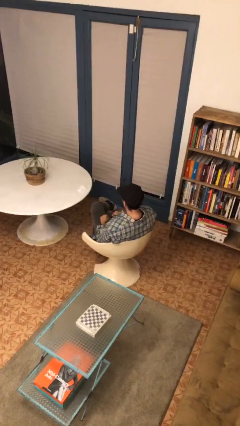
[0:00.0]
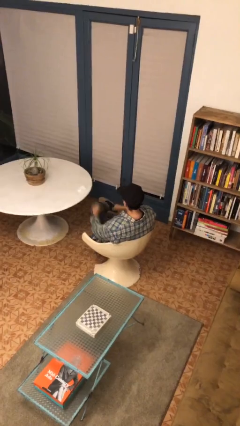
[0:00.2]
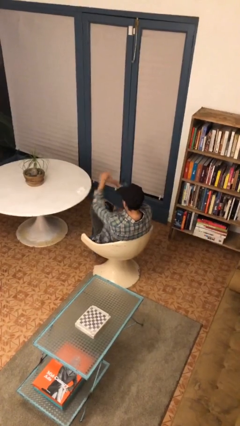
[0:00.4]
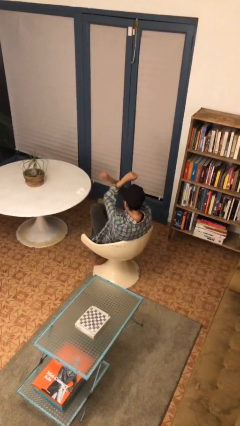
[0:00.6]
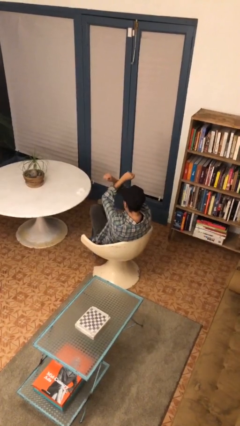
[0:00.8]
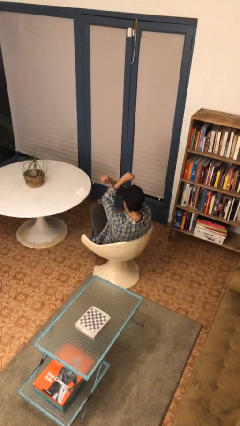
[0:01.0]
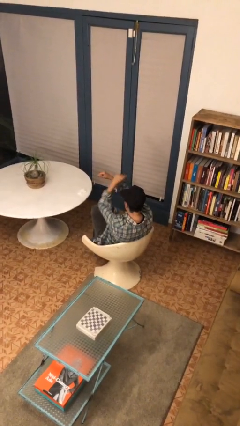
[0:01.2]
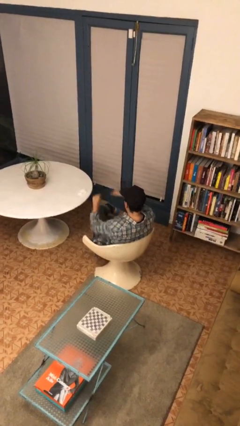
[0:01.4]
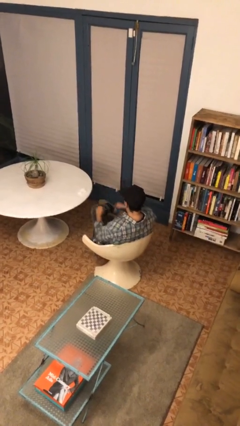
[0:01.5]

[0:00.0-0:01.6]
person gestures arms x

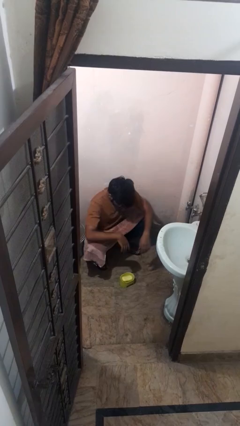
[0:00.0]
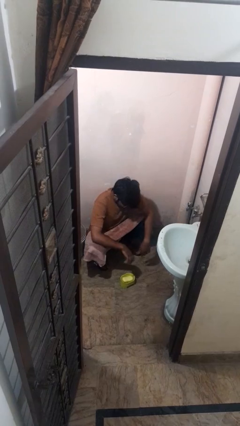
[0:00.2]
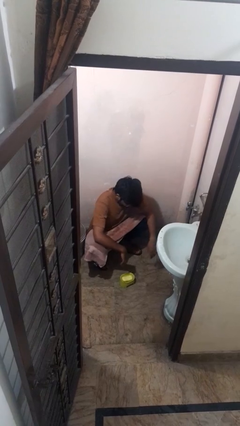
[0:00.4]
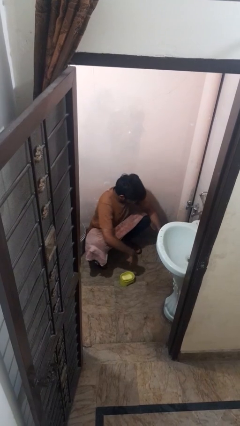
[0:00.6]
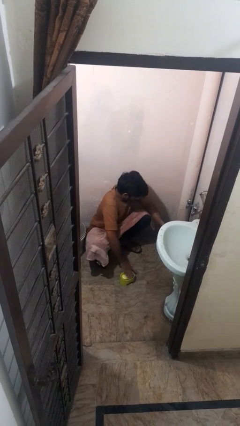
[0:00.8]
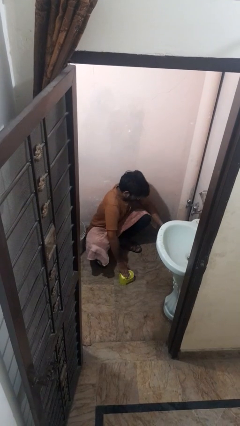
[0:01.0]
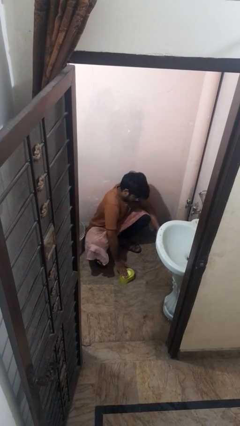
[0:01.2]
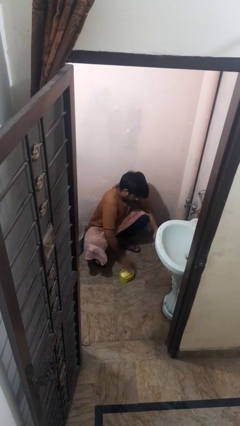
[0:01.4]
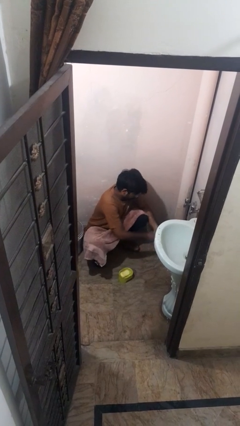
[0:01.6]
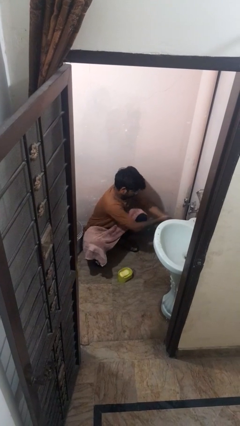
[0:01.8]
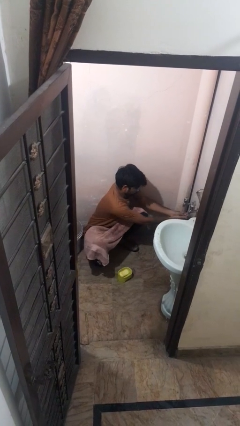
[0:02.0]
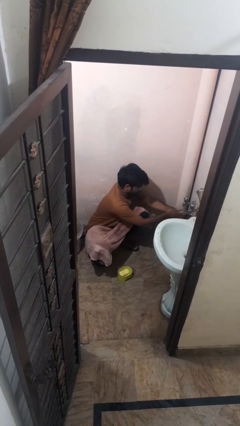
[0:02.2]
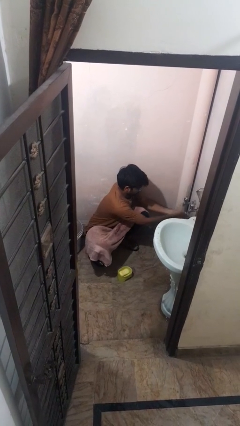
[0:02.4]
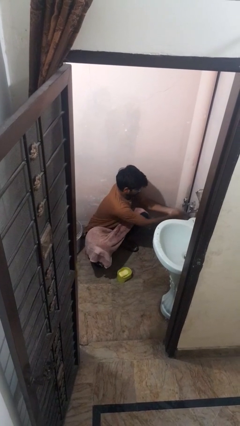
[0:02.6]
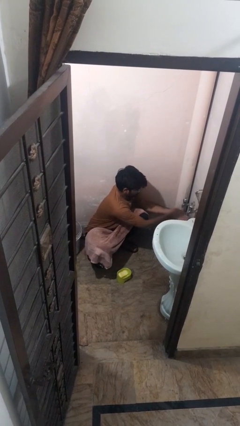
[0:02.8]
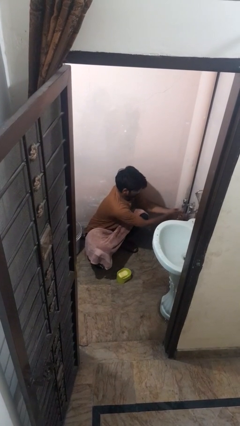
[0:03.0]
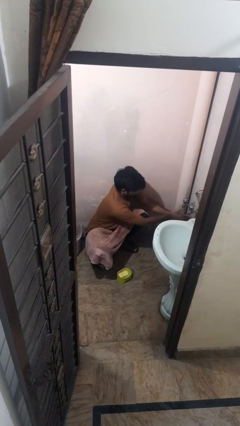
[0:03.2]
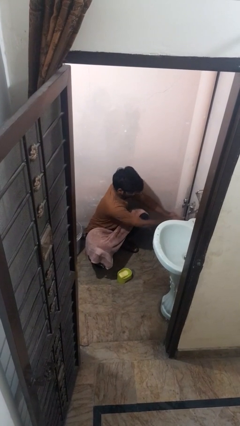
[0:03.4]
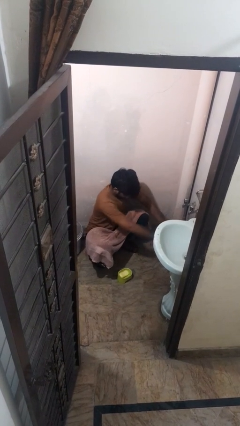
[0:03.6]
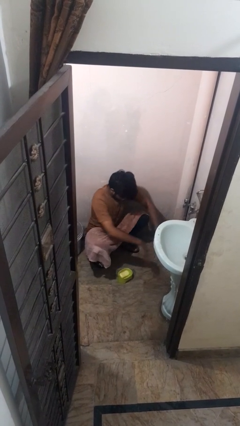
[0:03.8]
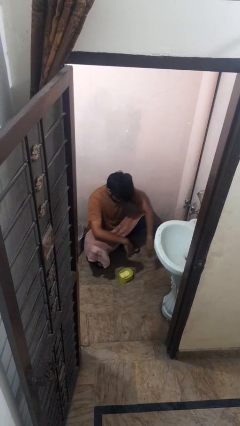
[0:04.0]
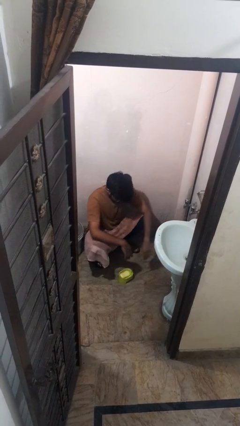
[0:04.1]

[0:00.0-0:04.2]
person washes hands

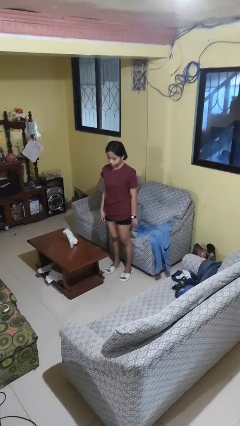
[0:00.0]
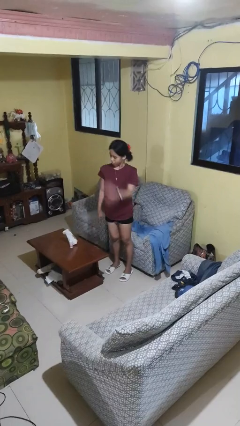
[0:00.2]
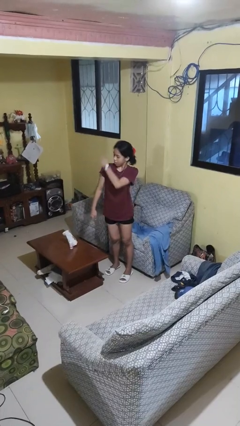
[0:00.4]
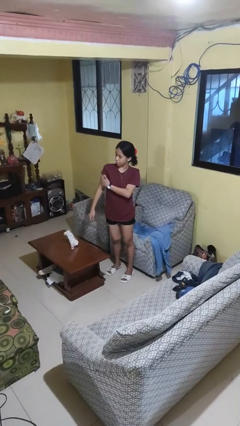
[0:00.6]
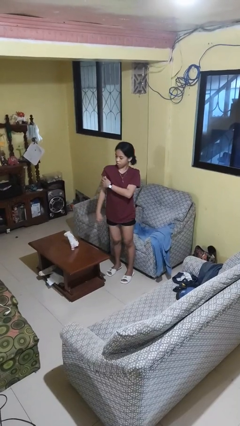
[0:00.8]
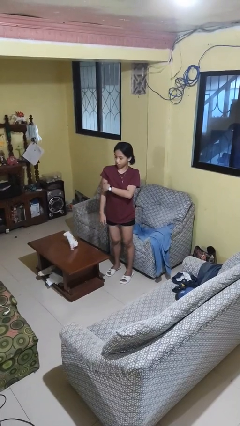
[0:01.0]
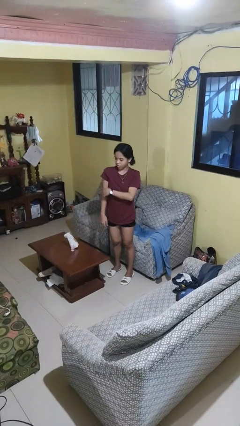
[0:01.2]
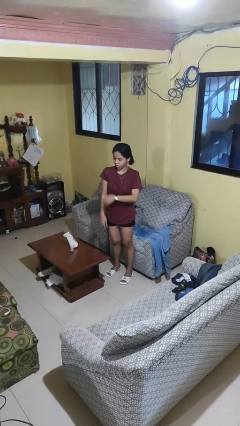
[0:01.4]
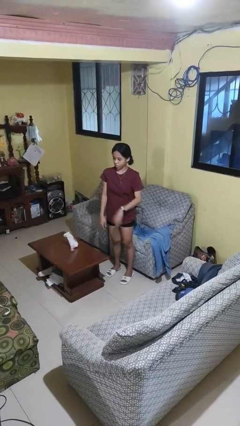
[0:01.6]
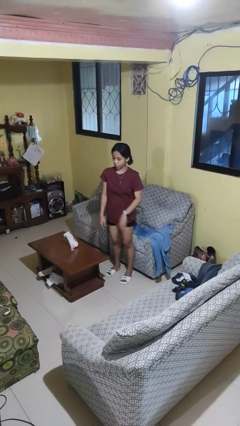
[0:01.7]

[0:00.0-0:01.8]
person swats bug

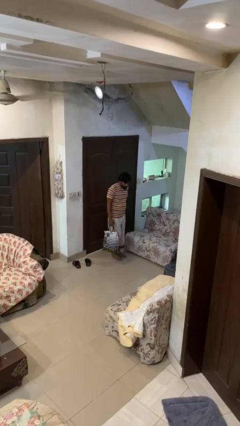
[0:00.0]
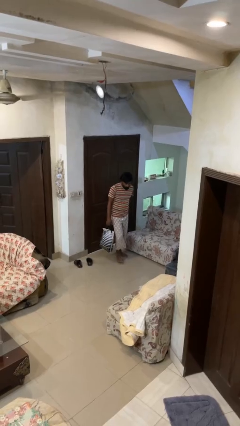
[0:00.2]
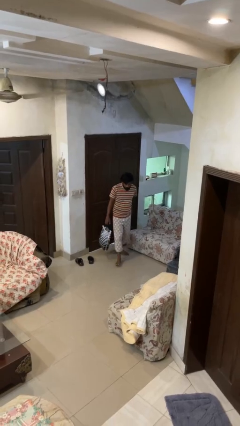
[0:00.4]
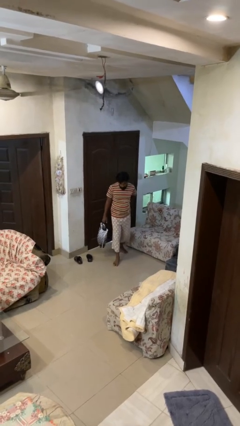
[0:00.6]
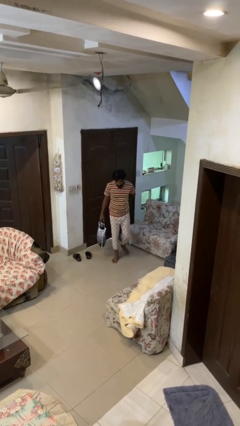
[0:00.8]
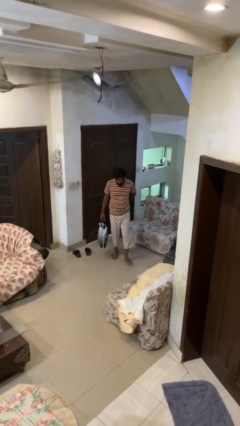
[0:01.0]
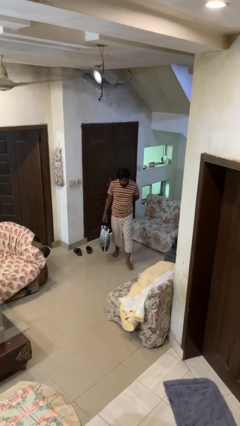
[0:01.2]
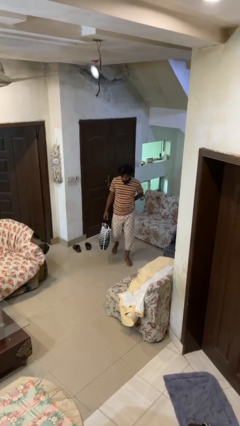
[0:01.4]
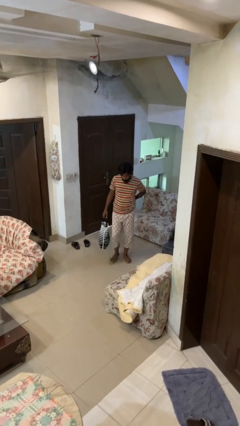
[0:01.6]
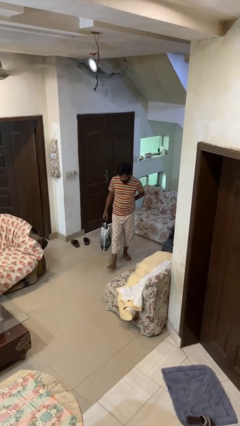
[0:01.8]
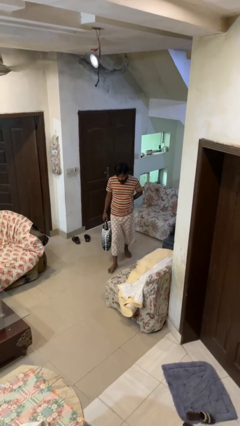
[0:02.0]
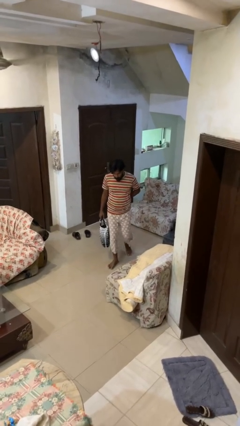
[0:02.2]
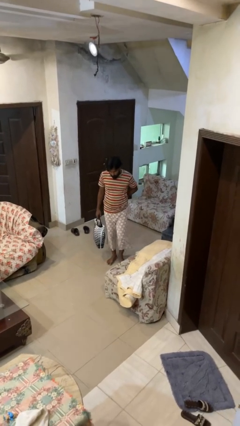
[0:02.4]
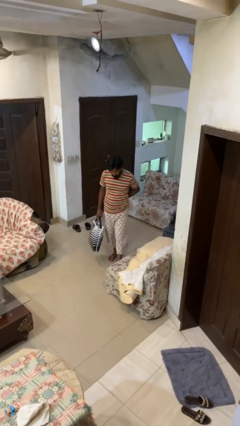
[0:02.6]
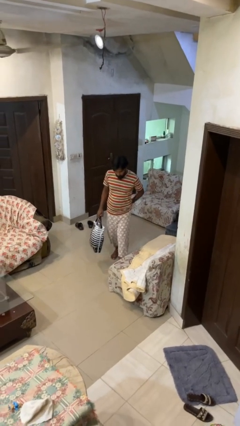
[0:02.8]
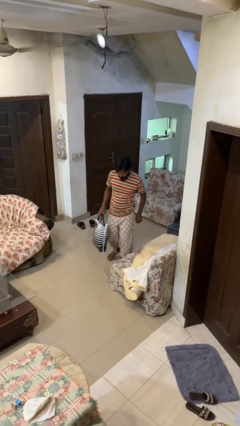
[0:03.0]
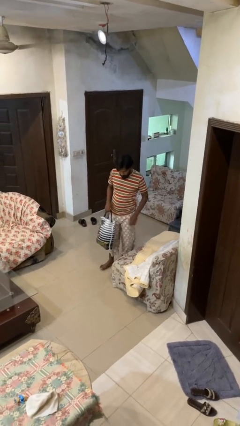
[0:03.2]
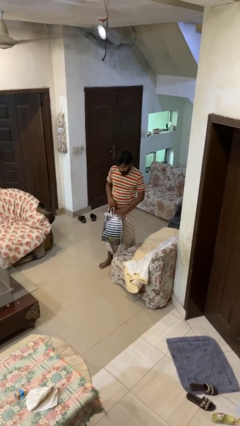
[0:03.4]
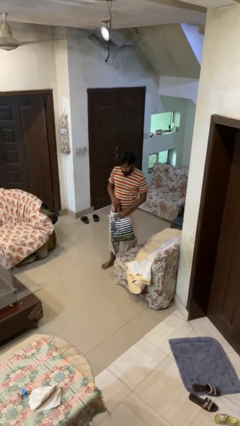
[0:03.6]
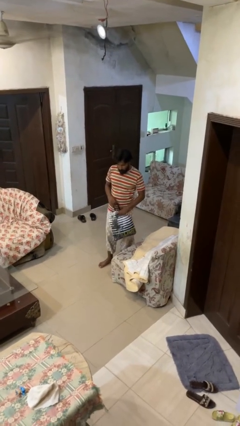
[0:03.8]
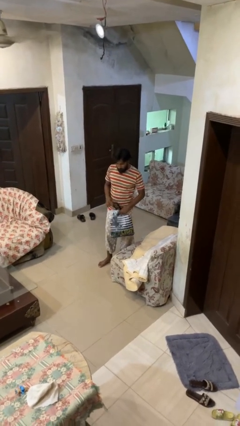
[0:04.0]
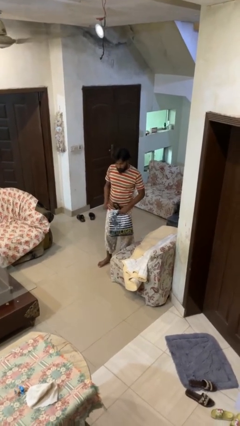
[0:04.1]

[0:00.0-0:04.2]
person carries groceries

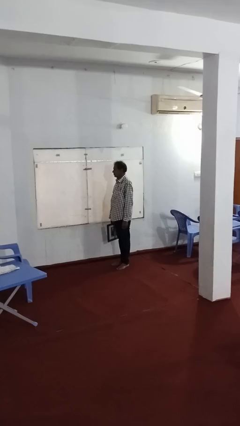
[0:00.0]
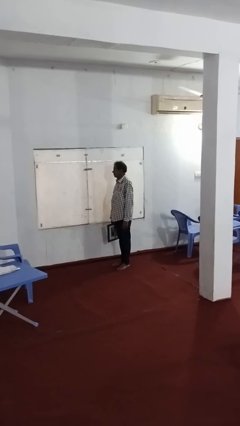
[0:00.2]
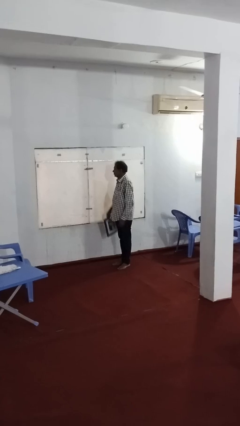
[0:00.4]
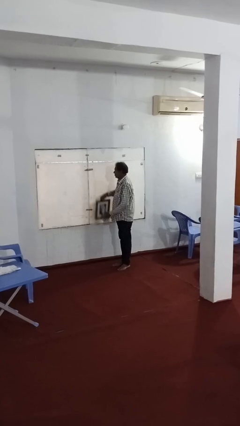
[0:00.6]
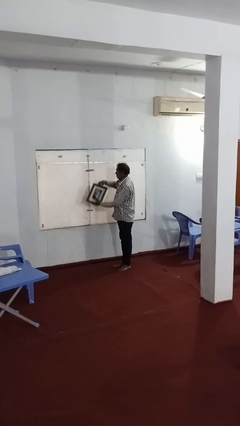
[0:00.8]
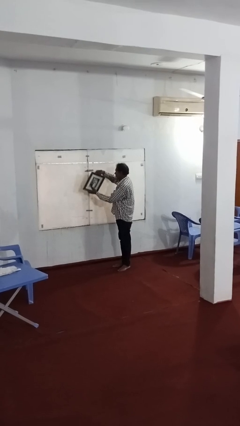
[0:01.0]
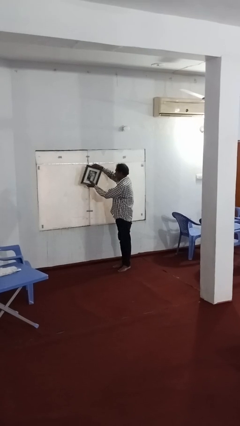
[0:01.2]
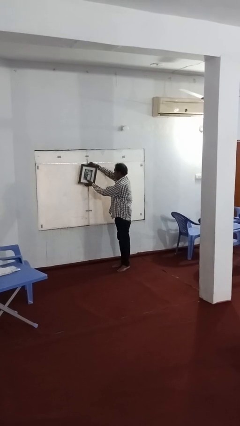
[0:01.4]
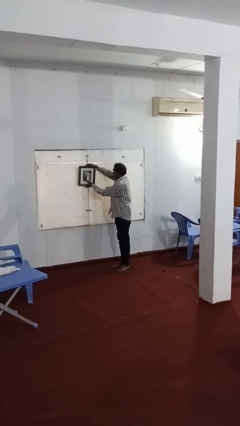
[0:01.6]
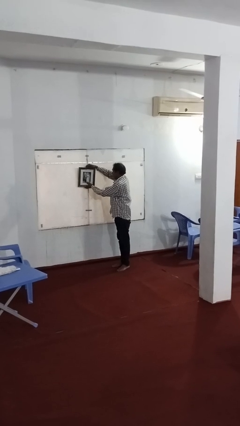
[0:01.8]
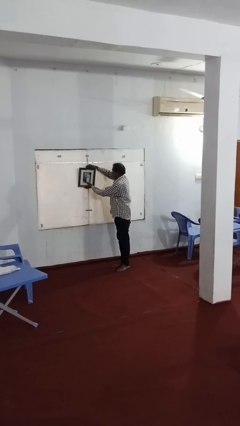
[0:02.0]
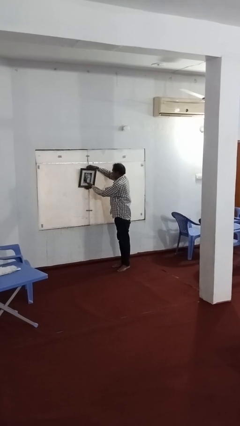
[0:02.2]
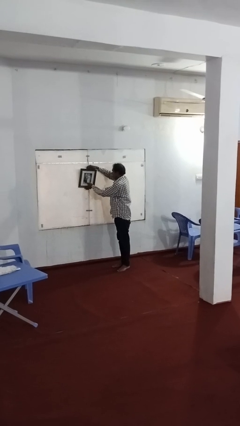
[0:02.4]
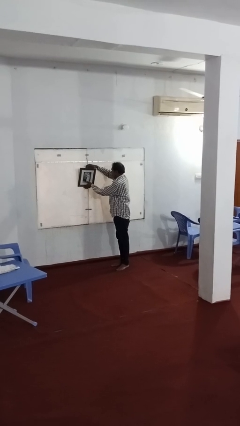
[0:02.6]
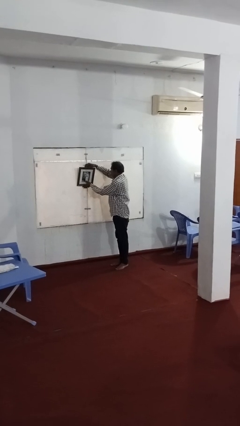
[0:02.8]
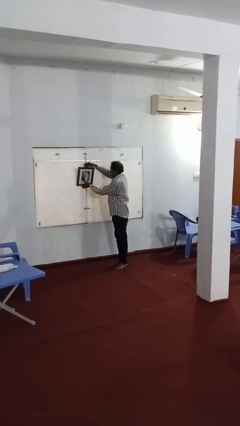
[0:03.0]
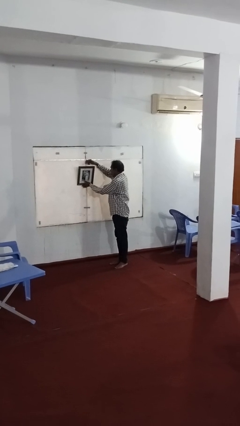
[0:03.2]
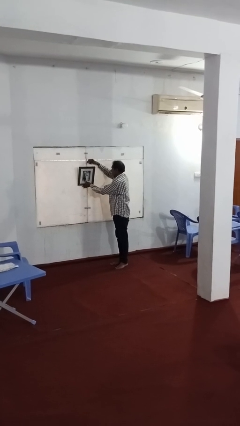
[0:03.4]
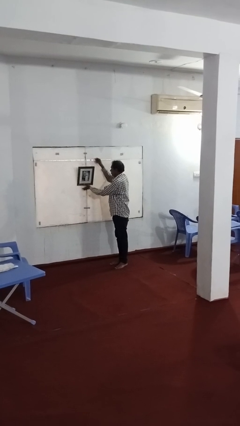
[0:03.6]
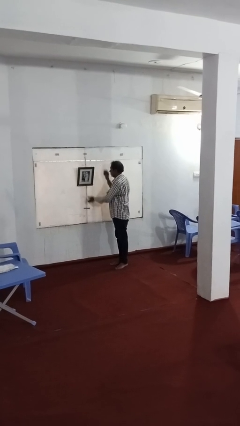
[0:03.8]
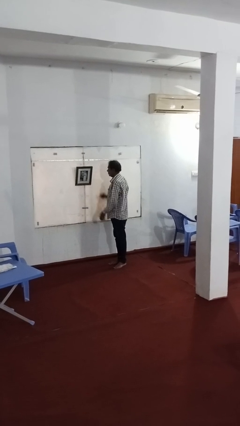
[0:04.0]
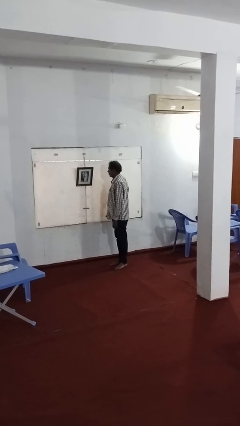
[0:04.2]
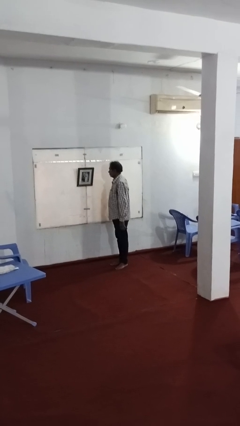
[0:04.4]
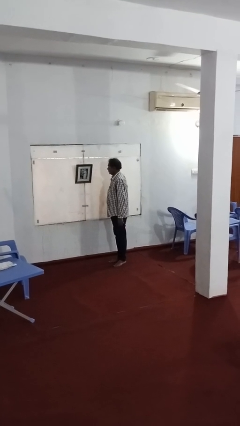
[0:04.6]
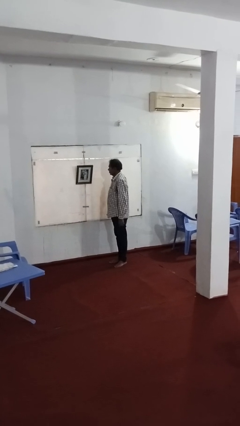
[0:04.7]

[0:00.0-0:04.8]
person puts up picture frame

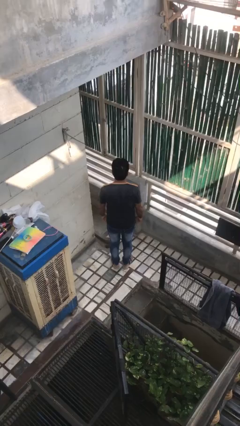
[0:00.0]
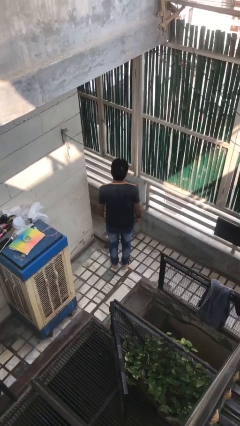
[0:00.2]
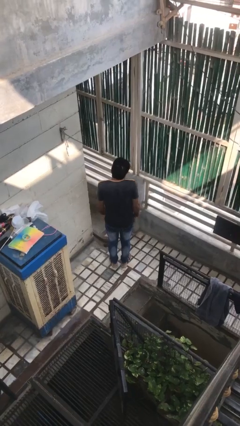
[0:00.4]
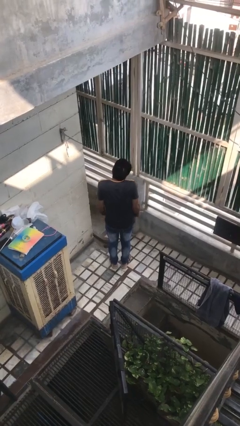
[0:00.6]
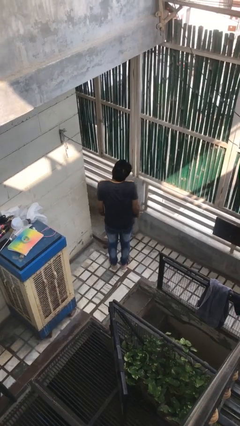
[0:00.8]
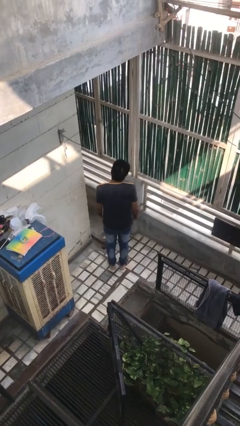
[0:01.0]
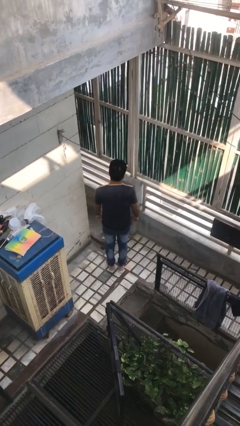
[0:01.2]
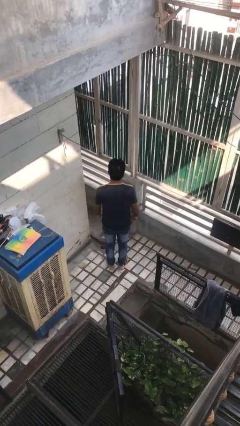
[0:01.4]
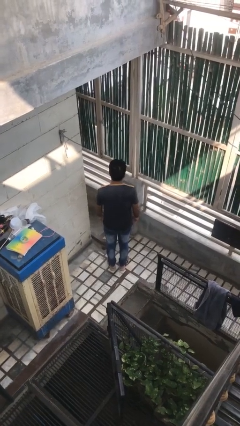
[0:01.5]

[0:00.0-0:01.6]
person shrugs
